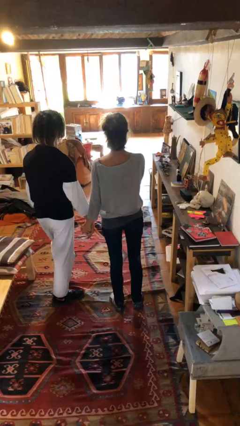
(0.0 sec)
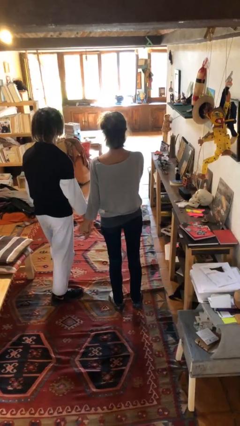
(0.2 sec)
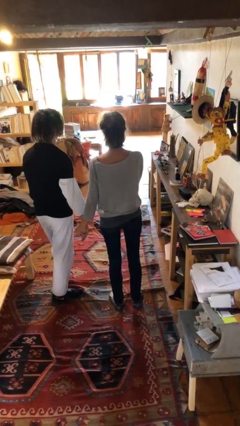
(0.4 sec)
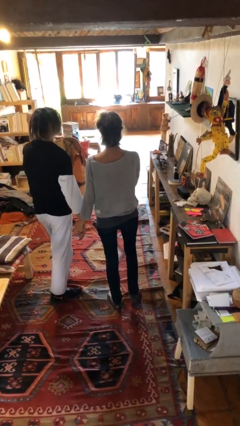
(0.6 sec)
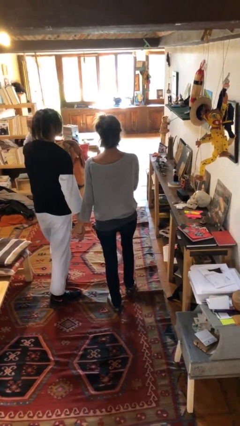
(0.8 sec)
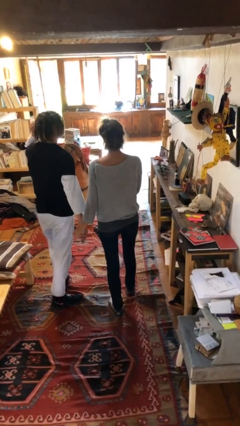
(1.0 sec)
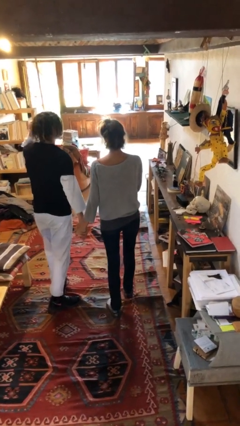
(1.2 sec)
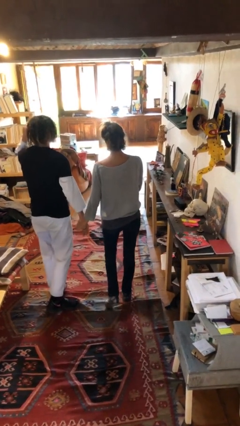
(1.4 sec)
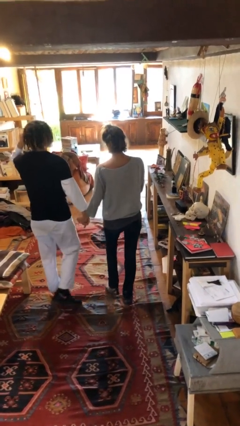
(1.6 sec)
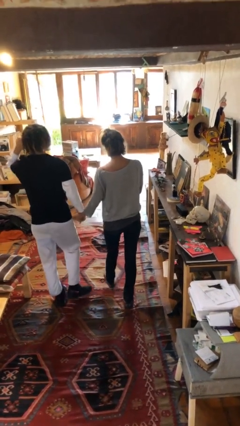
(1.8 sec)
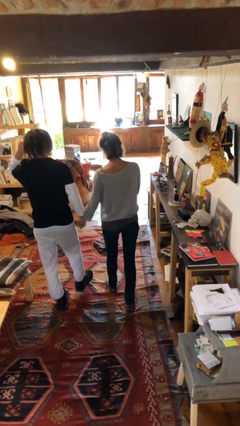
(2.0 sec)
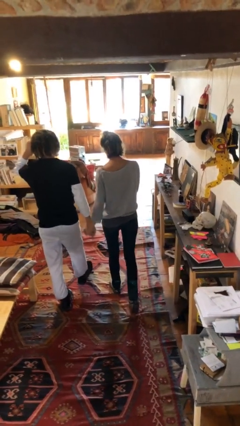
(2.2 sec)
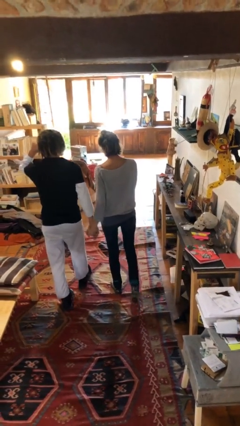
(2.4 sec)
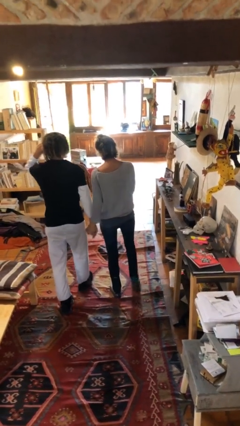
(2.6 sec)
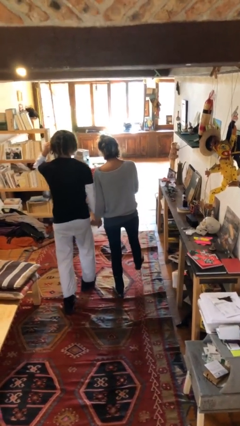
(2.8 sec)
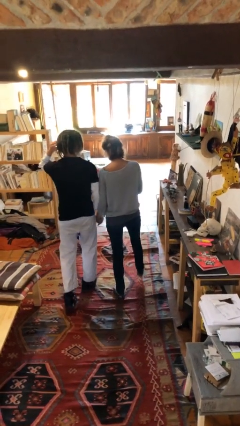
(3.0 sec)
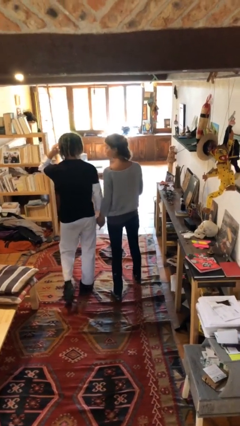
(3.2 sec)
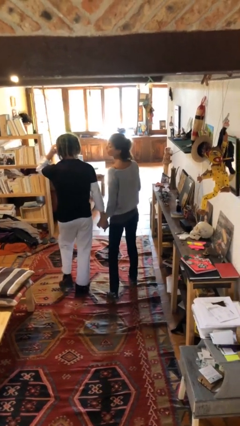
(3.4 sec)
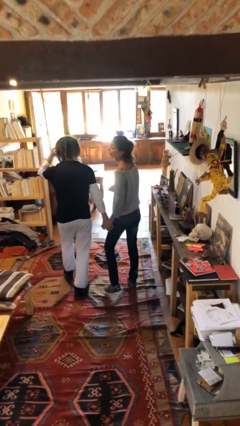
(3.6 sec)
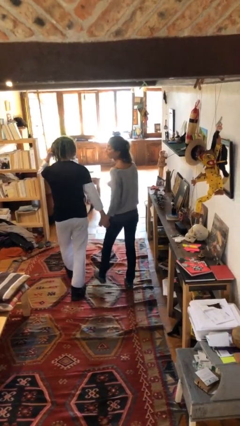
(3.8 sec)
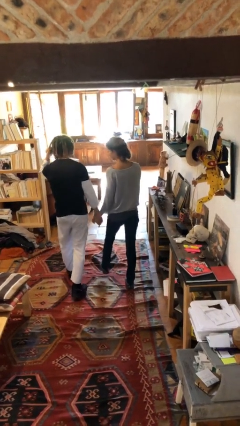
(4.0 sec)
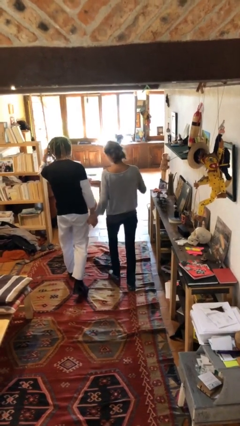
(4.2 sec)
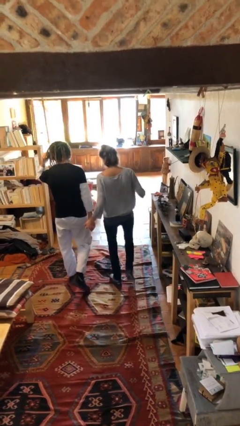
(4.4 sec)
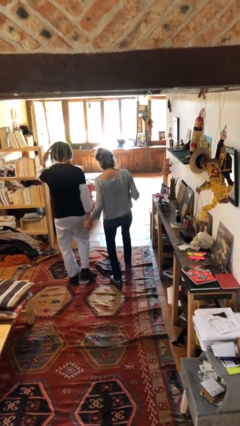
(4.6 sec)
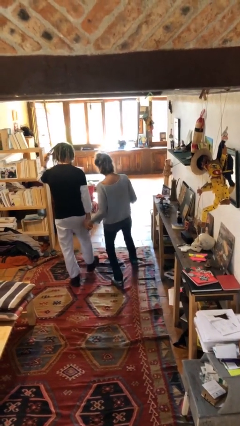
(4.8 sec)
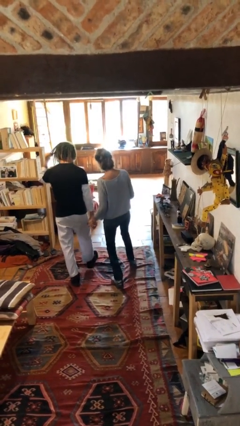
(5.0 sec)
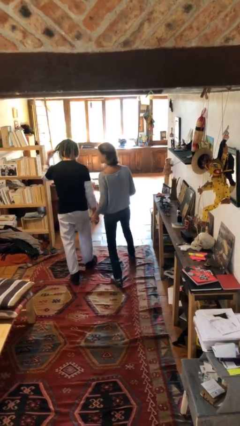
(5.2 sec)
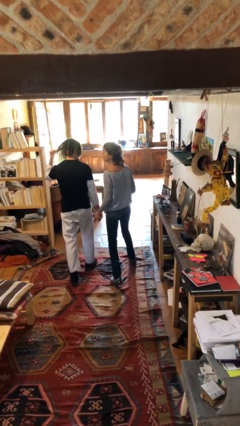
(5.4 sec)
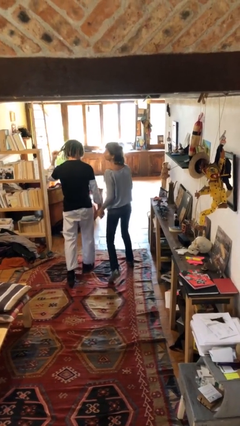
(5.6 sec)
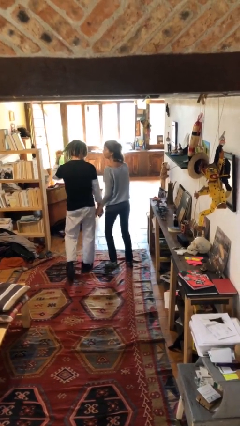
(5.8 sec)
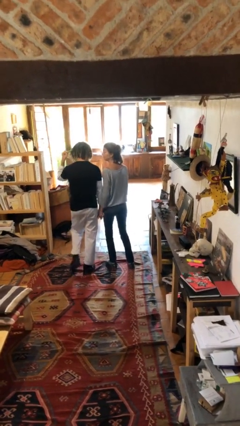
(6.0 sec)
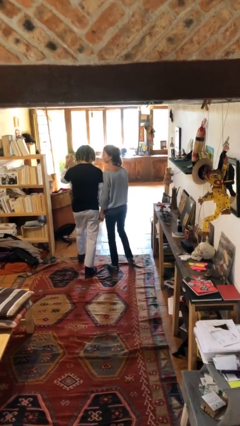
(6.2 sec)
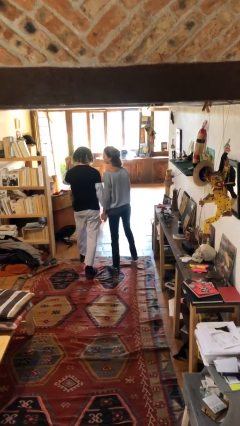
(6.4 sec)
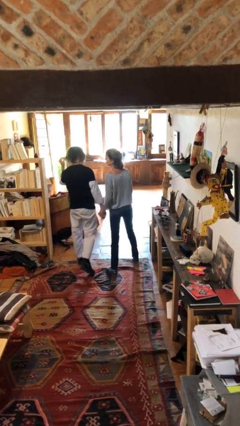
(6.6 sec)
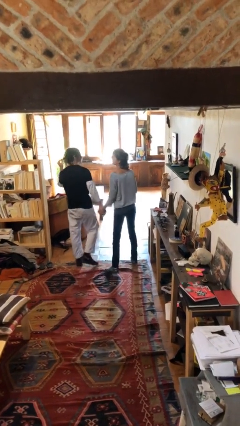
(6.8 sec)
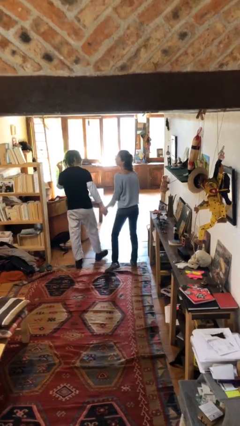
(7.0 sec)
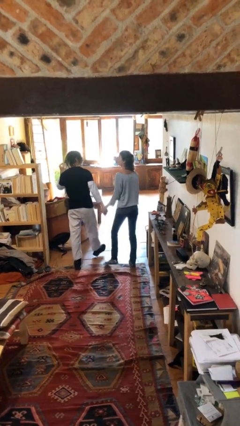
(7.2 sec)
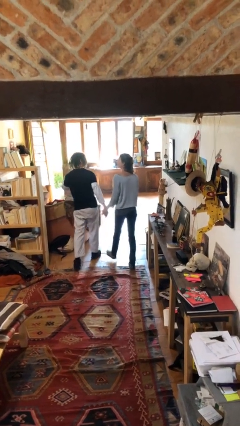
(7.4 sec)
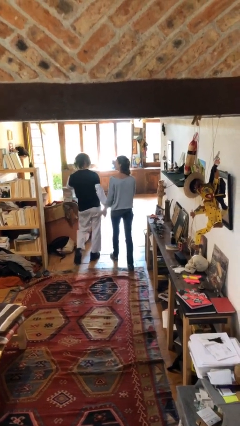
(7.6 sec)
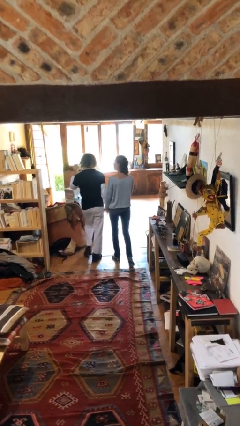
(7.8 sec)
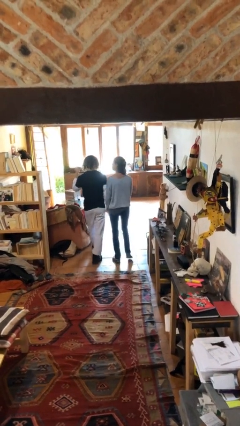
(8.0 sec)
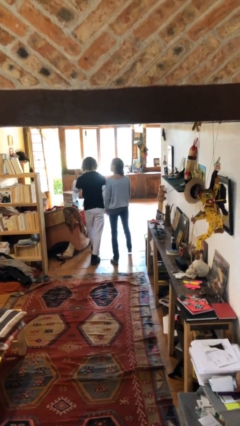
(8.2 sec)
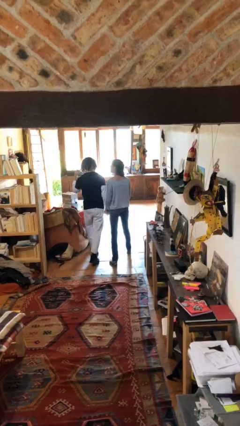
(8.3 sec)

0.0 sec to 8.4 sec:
person holds hand

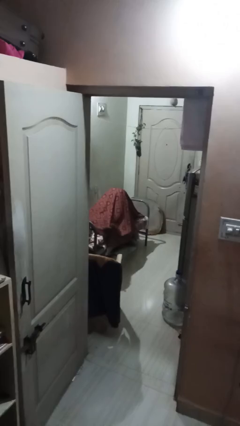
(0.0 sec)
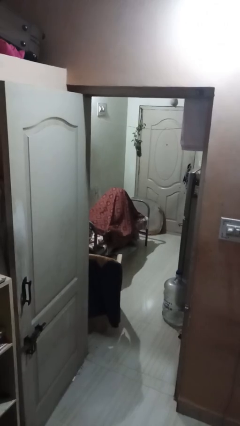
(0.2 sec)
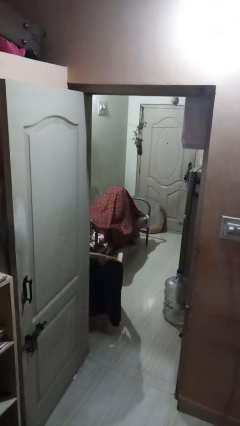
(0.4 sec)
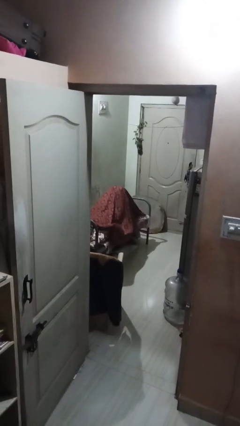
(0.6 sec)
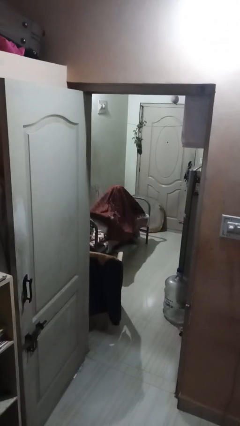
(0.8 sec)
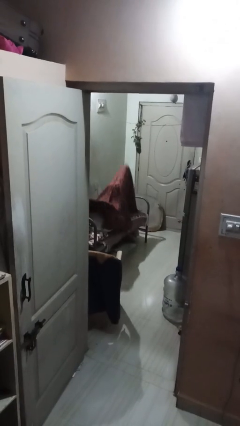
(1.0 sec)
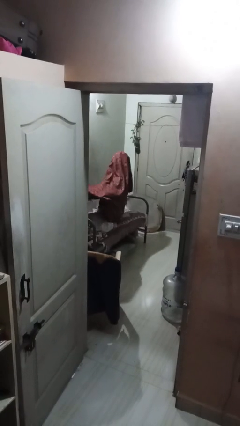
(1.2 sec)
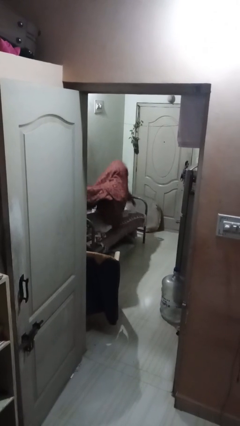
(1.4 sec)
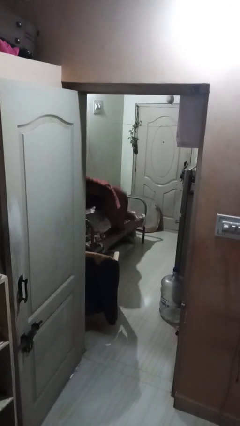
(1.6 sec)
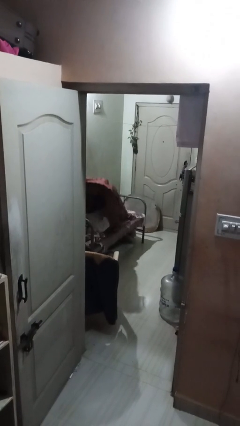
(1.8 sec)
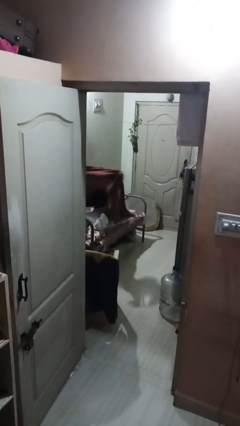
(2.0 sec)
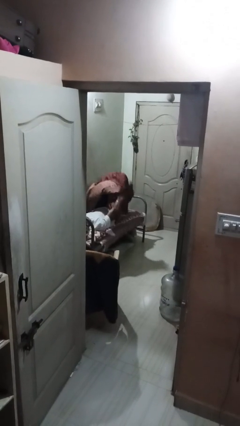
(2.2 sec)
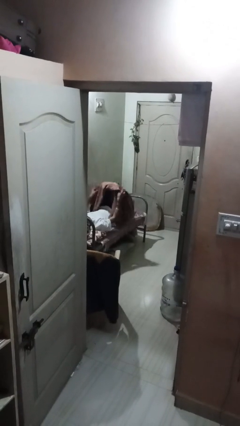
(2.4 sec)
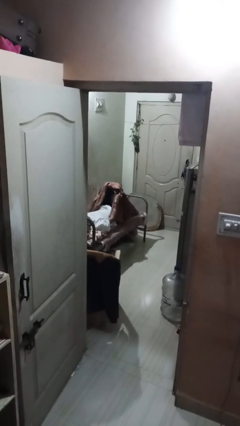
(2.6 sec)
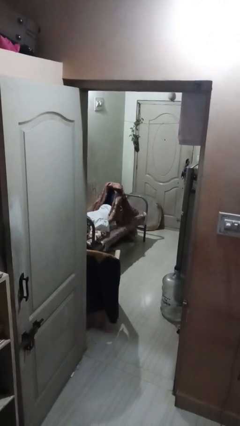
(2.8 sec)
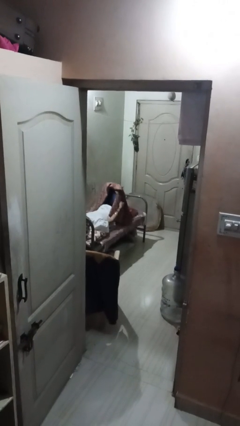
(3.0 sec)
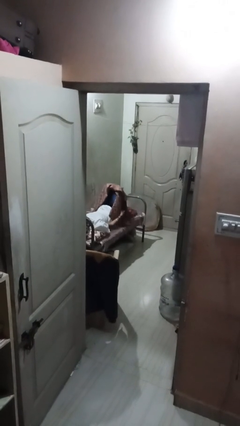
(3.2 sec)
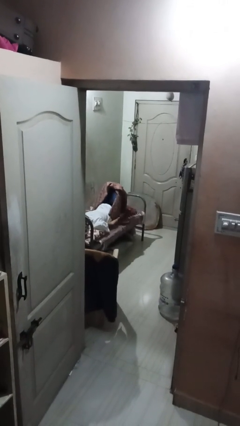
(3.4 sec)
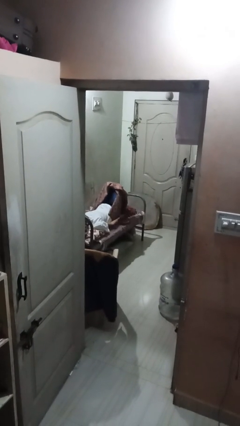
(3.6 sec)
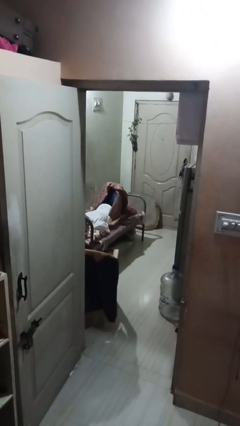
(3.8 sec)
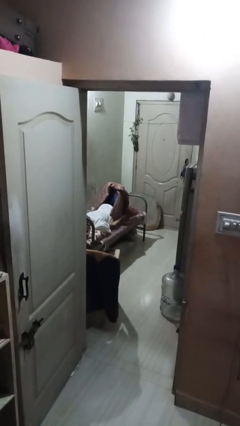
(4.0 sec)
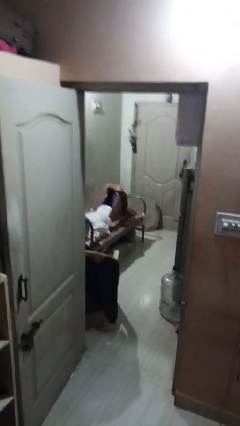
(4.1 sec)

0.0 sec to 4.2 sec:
person uncovers with bedsheets

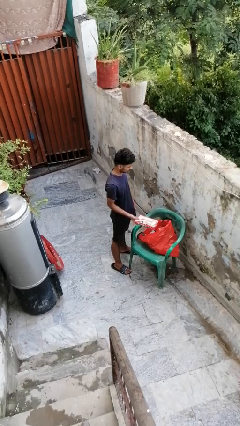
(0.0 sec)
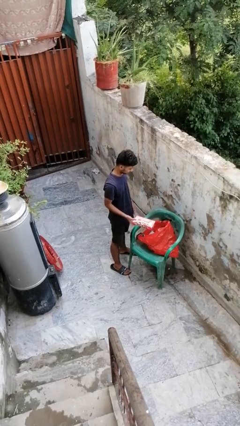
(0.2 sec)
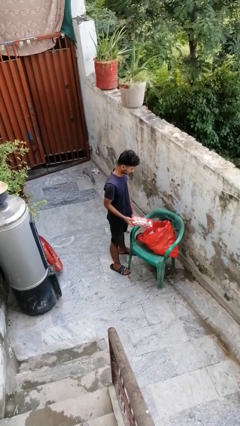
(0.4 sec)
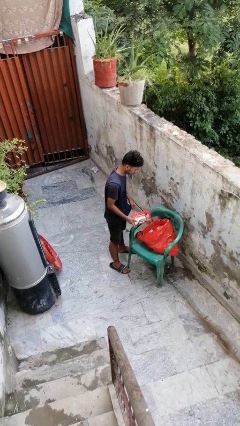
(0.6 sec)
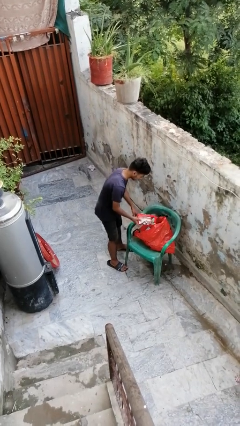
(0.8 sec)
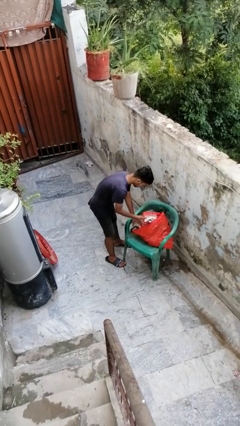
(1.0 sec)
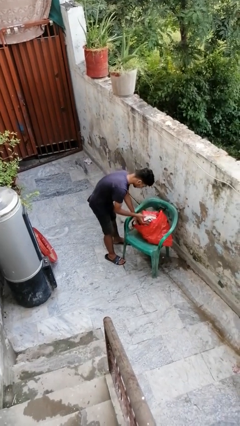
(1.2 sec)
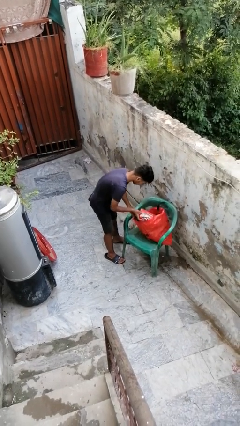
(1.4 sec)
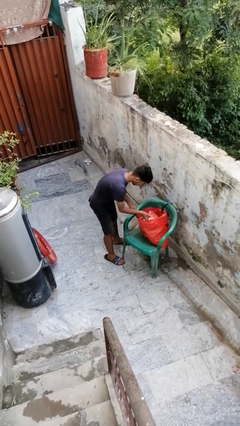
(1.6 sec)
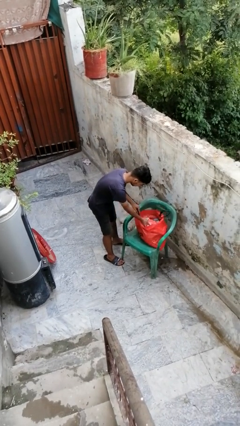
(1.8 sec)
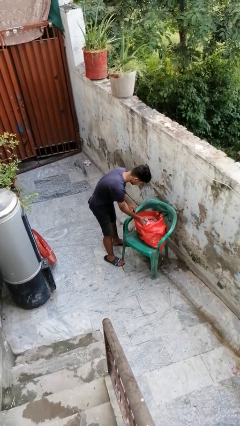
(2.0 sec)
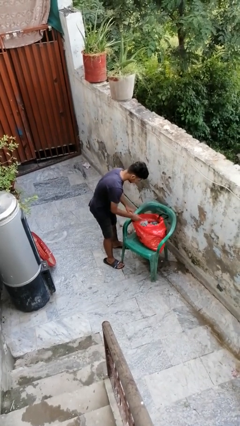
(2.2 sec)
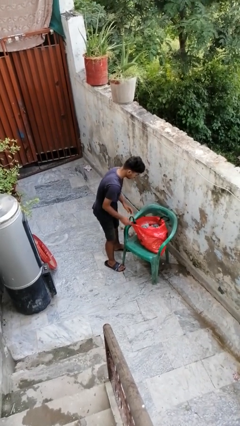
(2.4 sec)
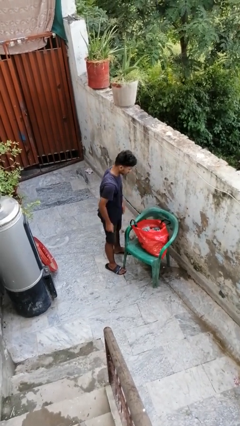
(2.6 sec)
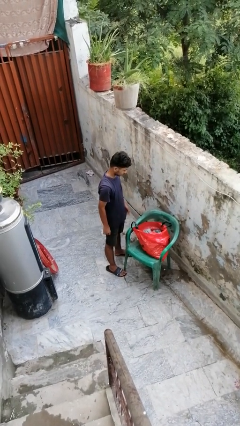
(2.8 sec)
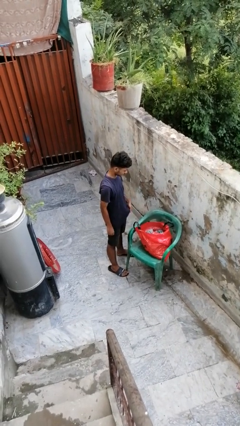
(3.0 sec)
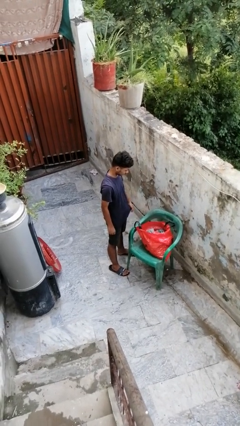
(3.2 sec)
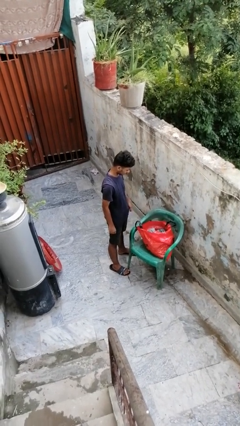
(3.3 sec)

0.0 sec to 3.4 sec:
person puts object into bag

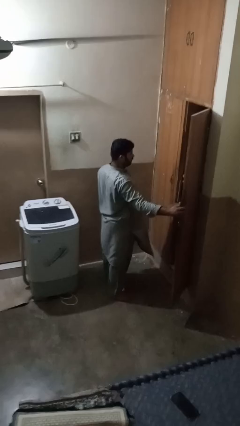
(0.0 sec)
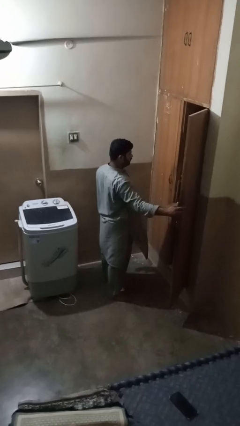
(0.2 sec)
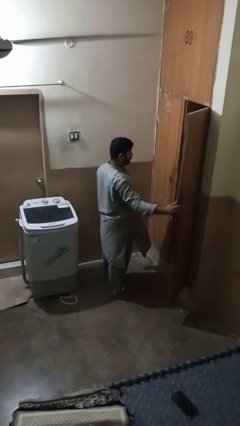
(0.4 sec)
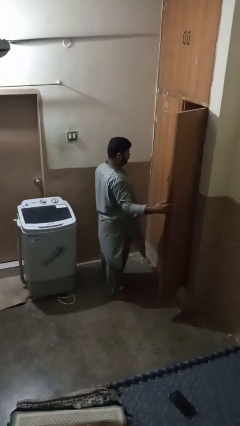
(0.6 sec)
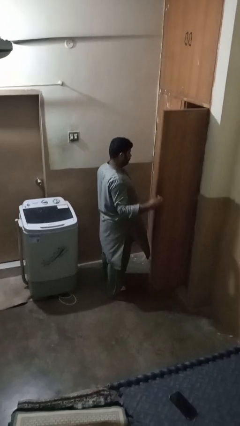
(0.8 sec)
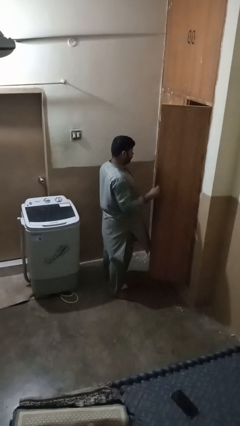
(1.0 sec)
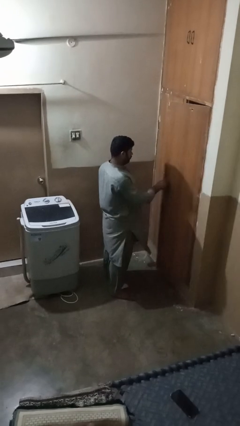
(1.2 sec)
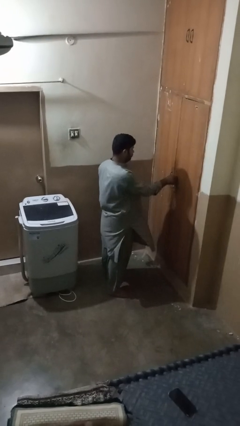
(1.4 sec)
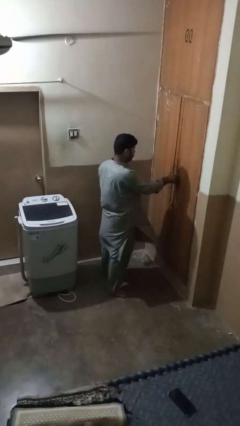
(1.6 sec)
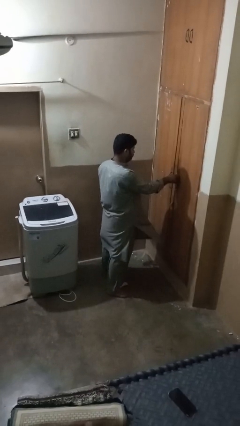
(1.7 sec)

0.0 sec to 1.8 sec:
person closes closet door
